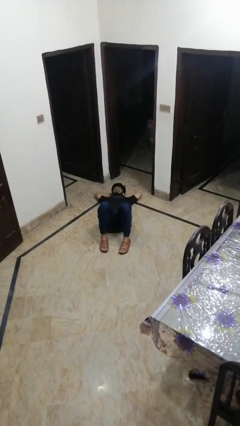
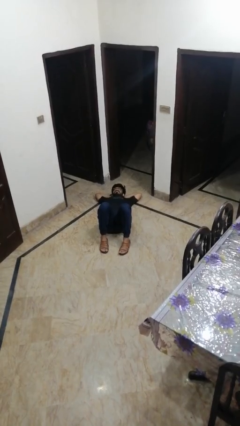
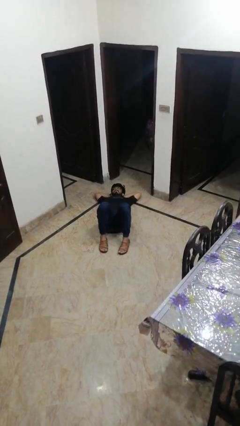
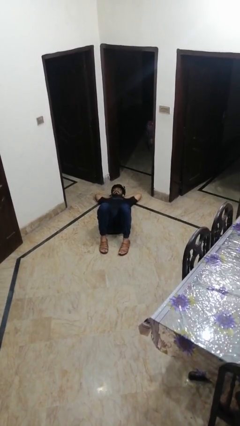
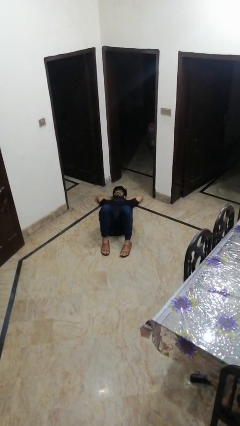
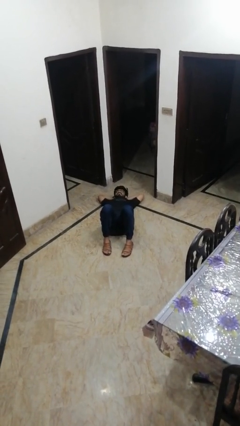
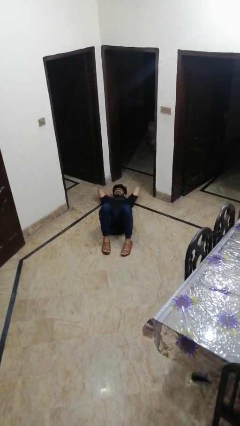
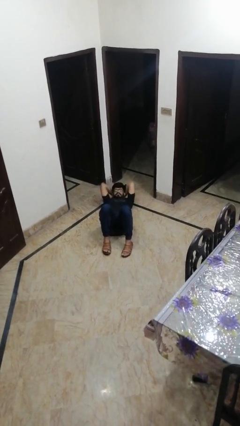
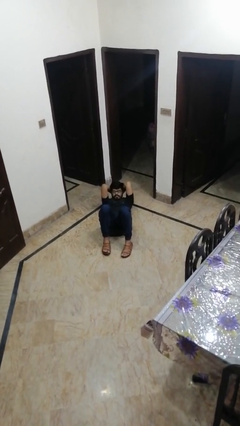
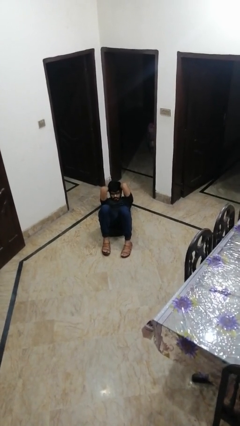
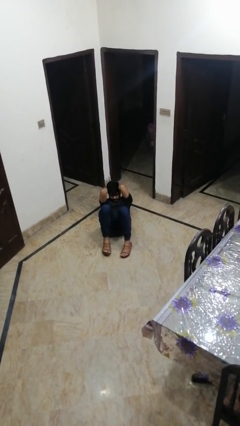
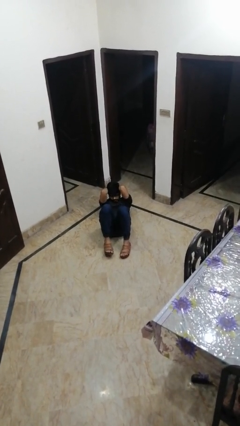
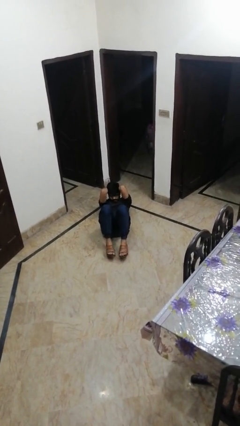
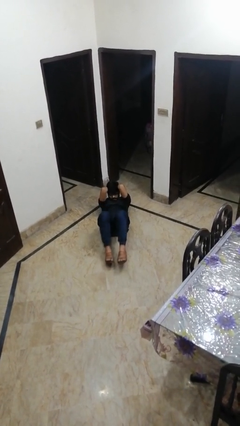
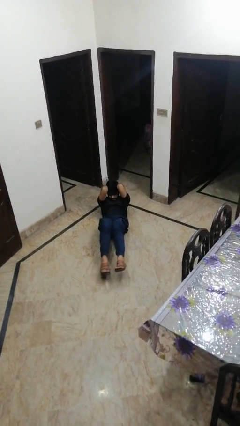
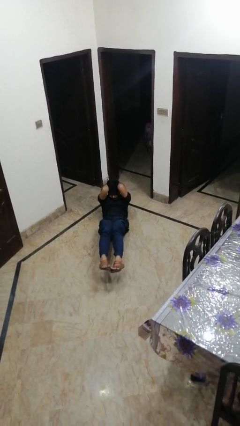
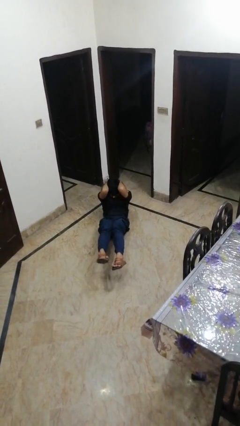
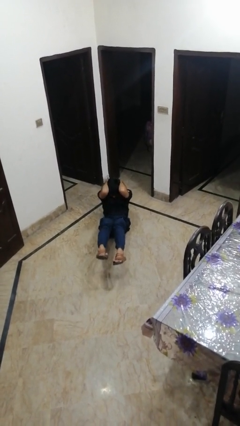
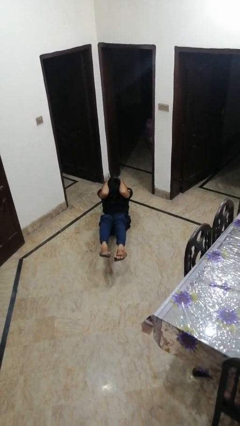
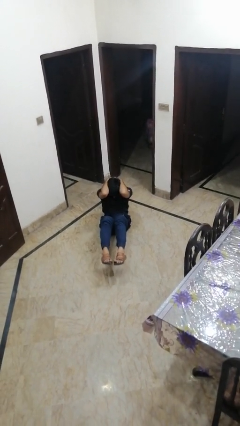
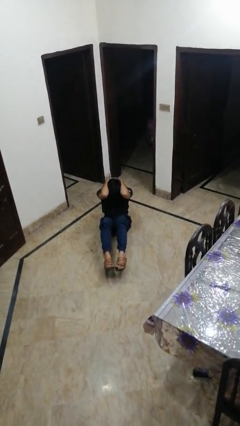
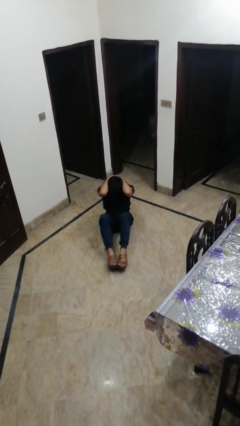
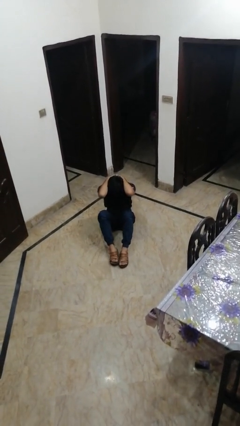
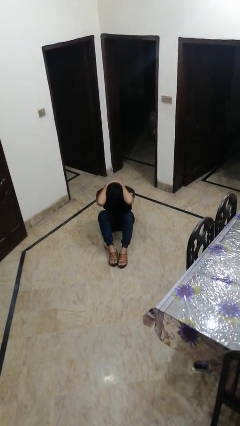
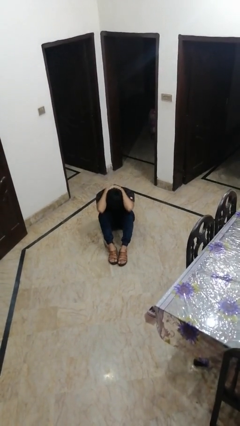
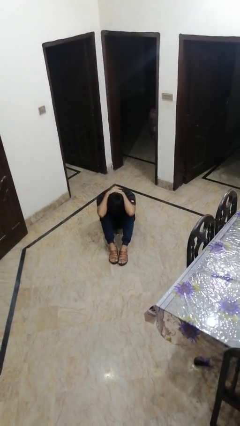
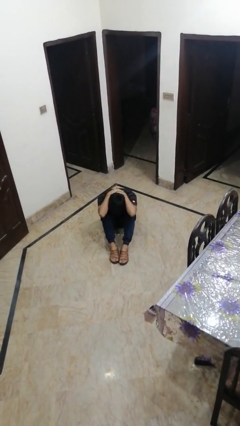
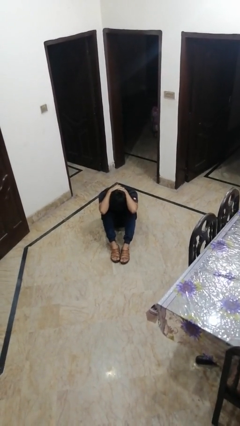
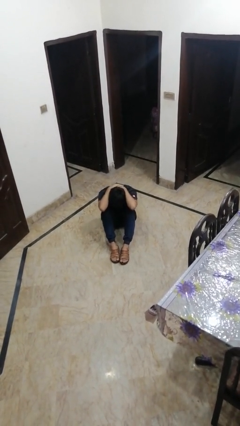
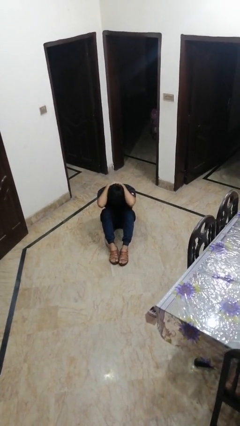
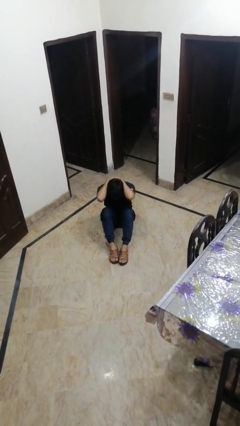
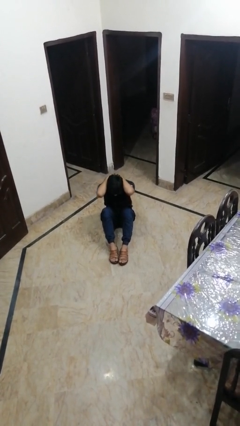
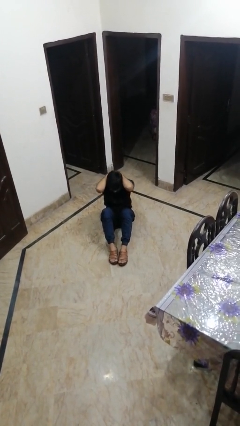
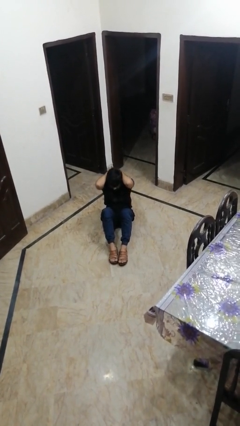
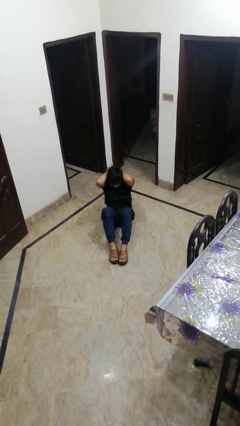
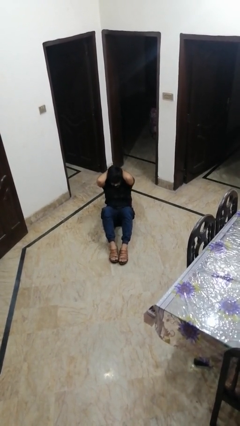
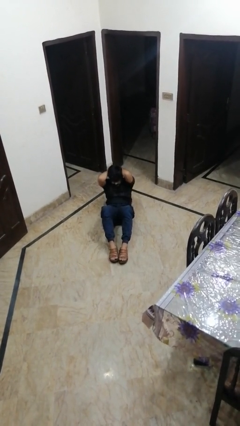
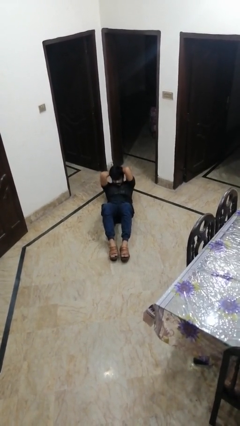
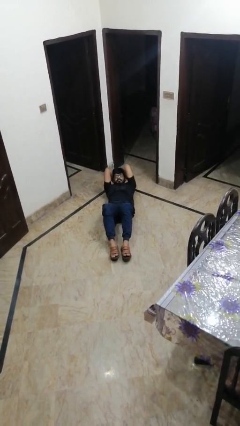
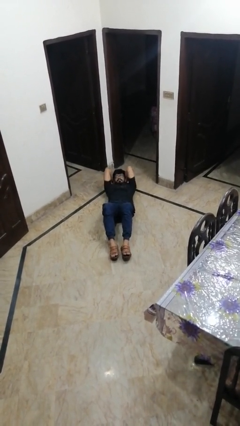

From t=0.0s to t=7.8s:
person exercises with situp

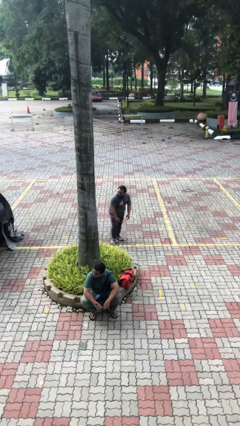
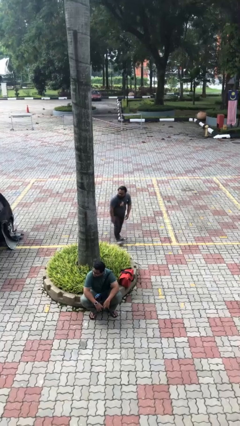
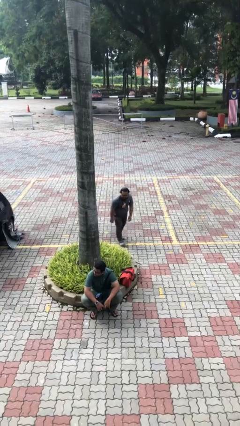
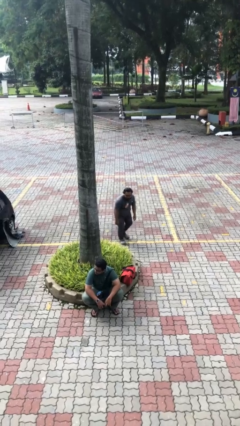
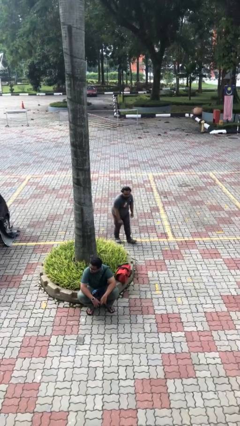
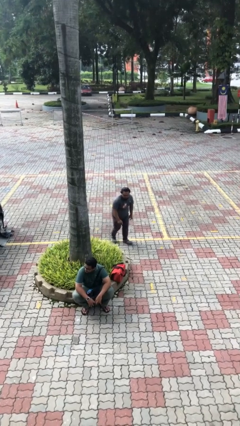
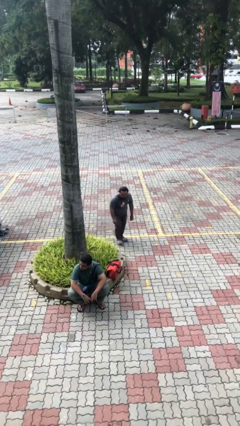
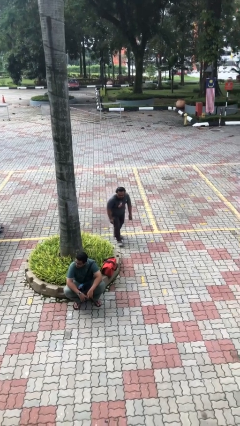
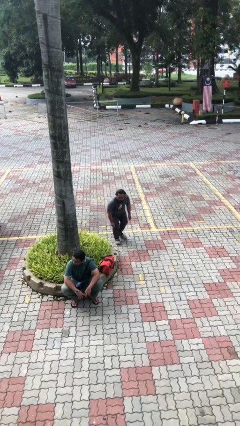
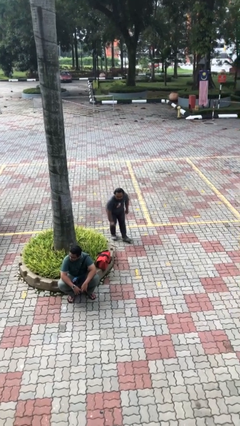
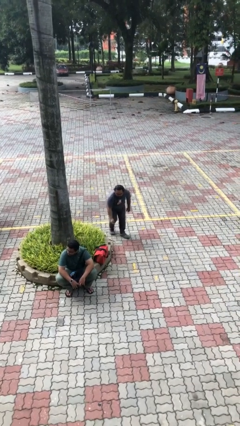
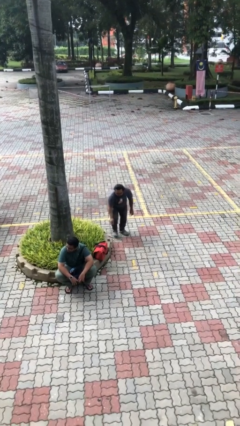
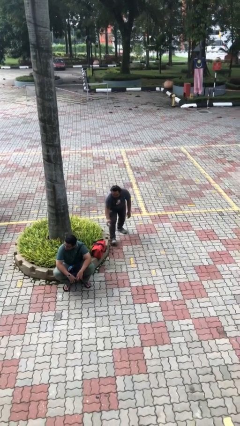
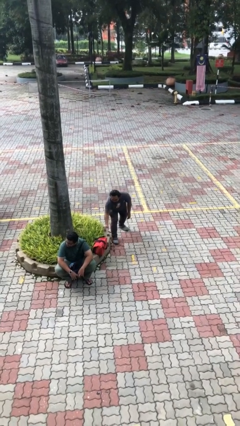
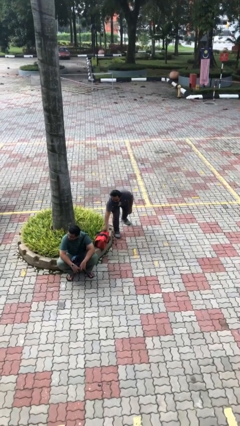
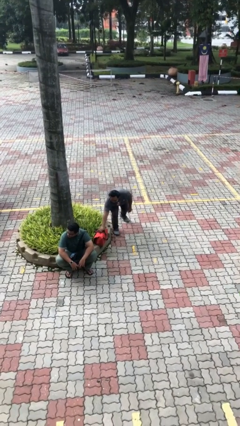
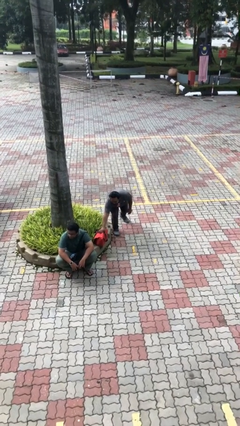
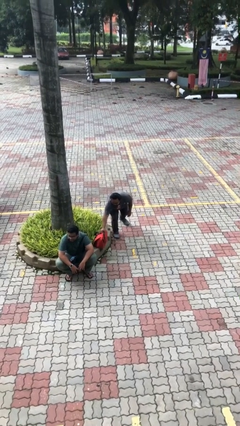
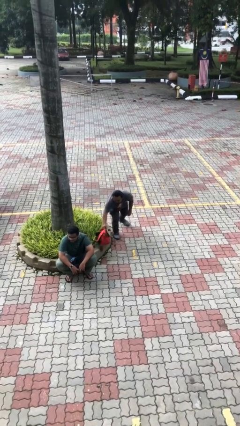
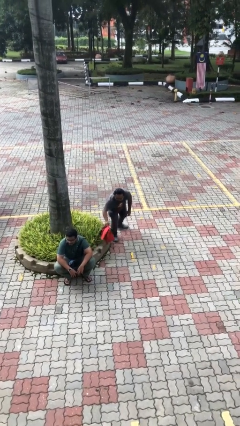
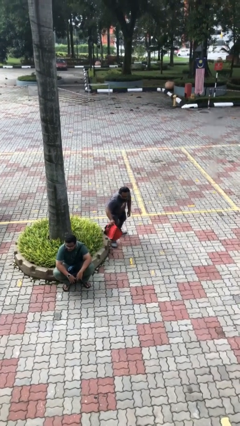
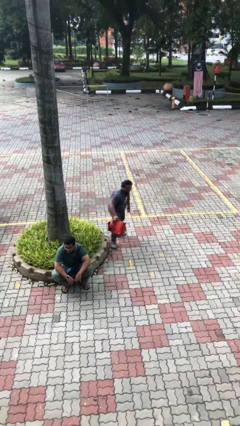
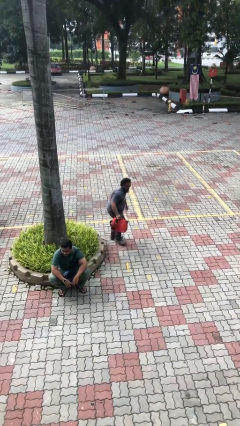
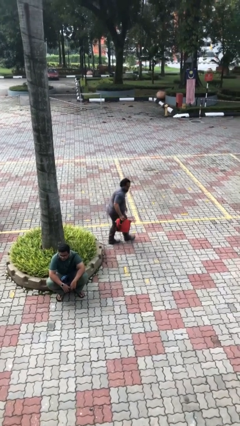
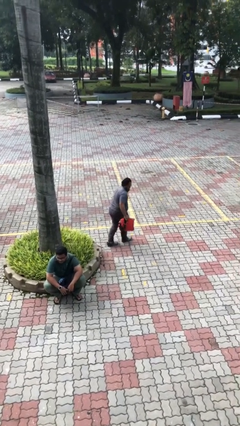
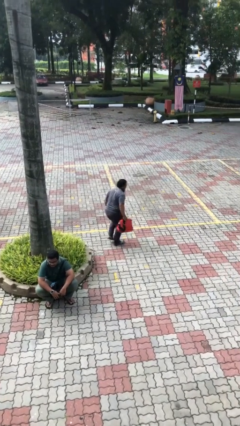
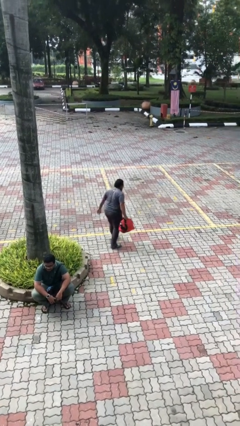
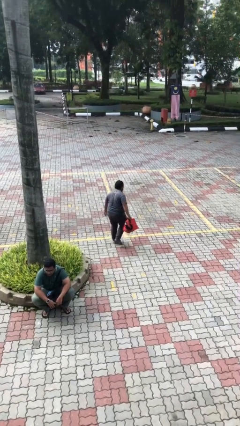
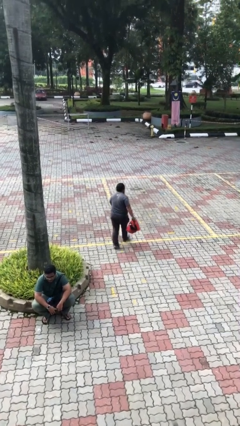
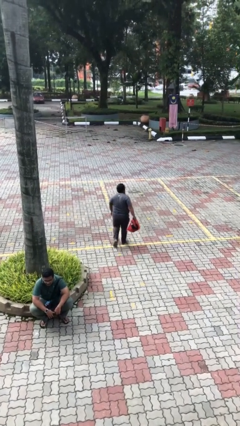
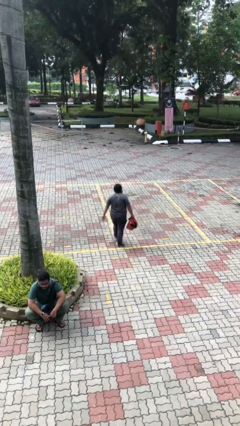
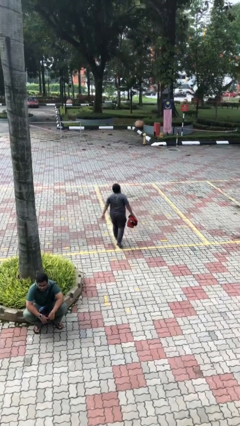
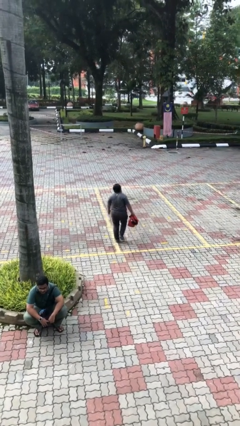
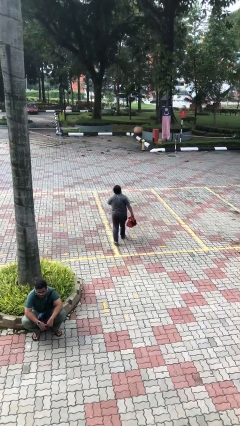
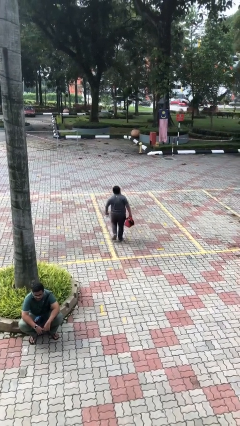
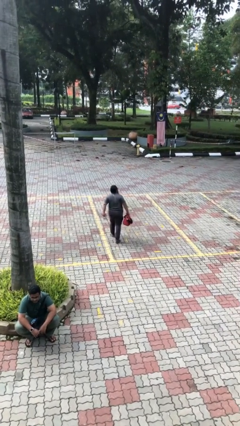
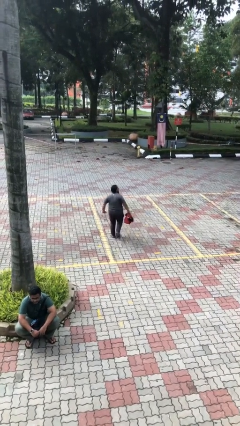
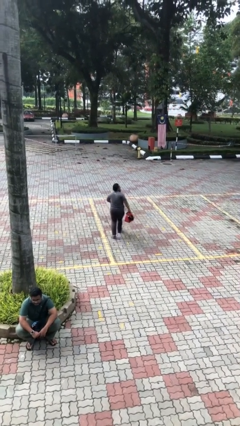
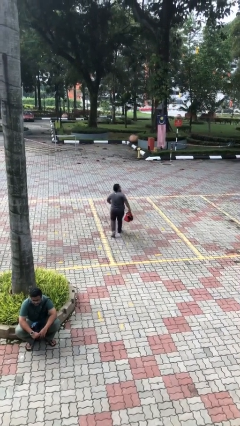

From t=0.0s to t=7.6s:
person steals object from person

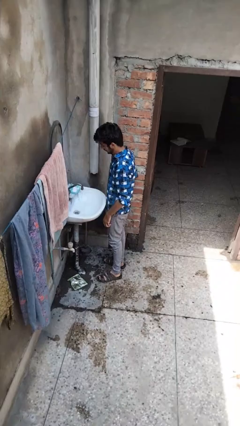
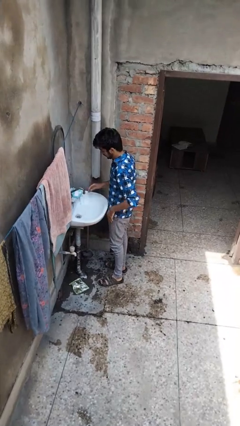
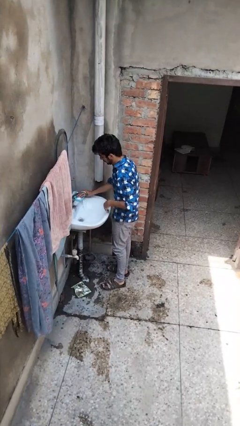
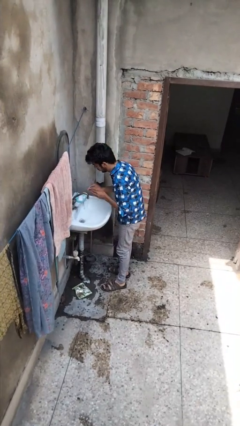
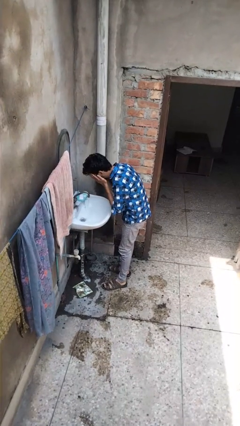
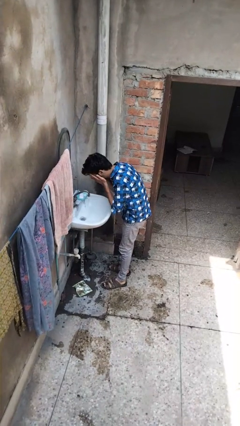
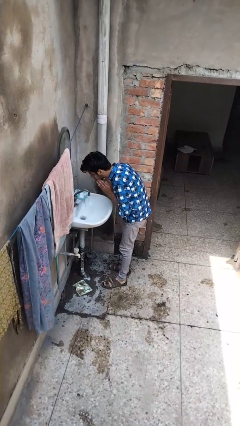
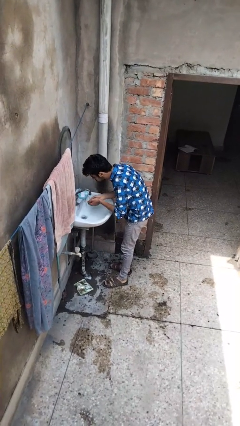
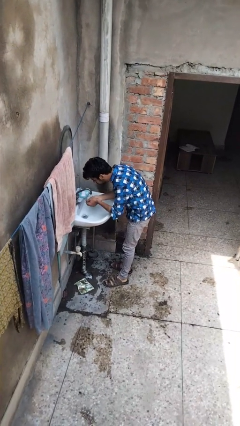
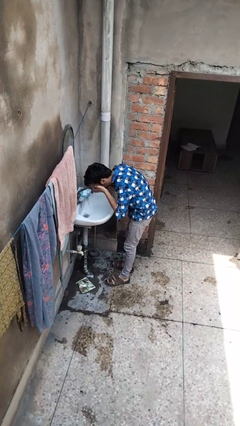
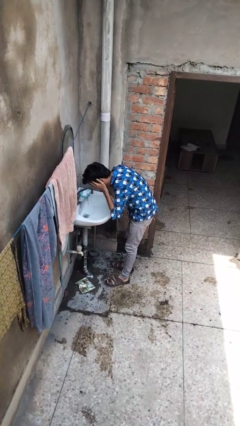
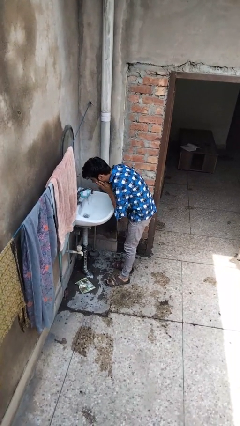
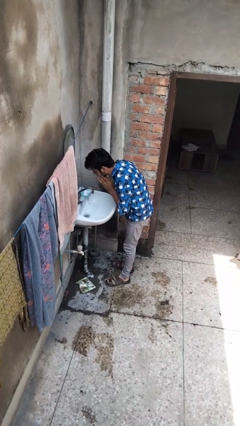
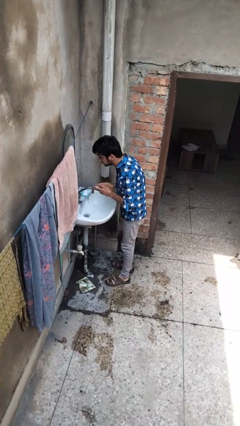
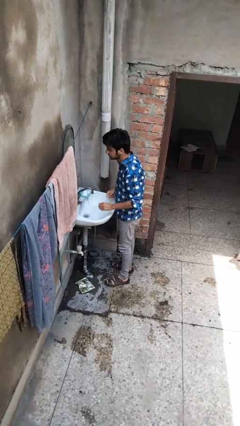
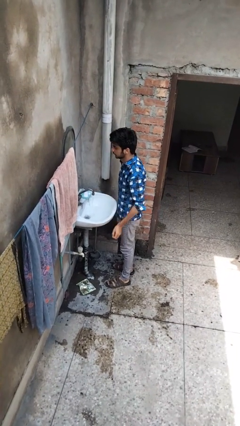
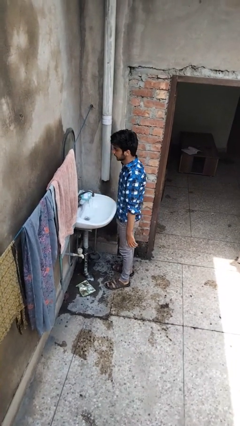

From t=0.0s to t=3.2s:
person washes face
